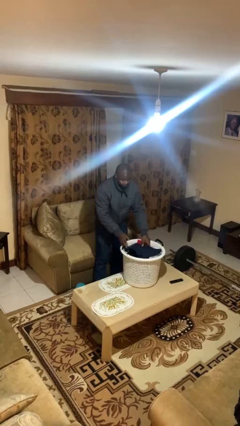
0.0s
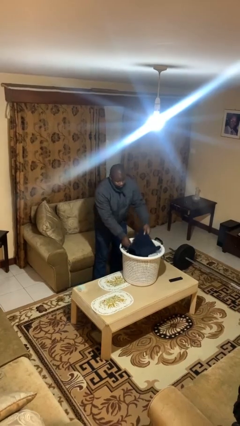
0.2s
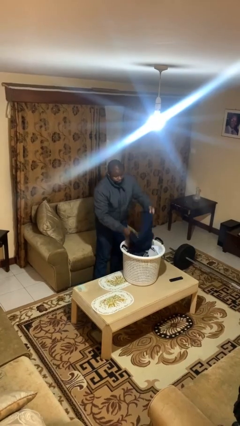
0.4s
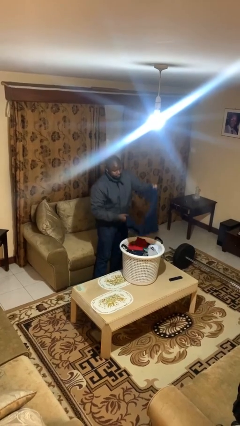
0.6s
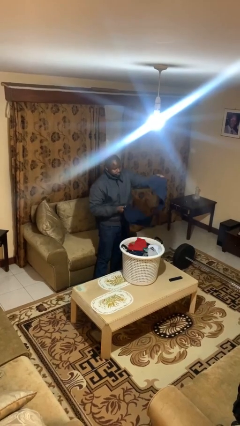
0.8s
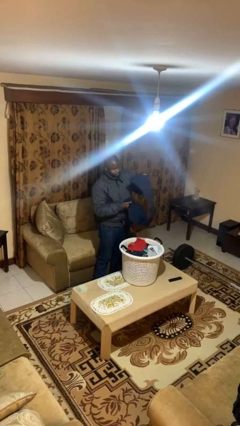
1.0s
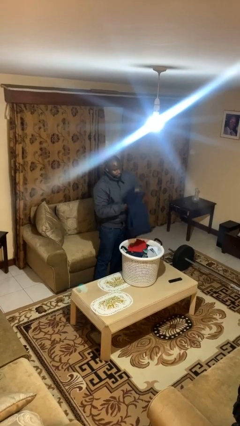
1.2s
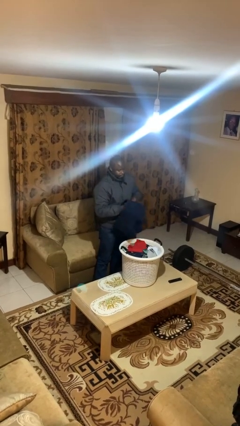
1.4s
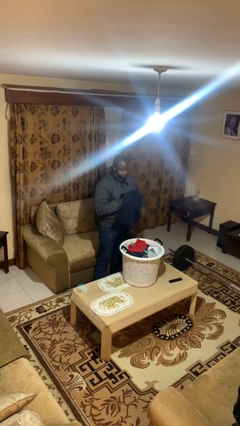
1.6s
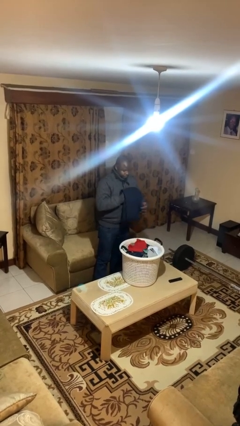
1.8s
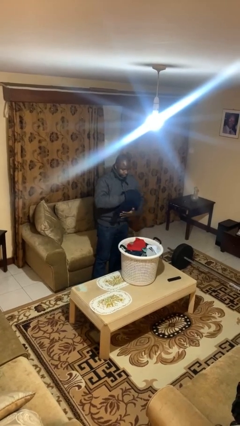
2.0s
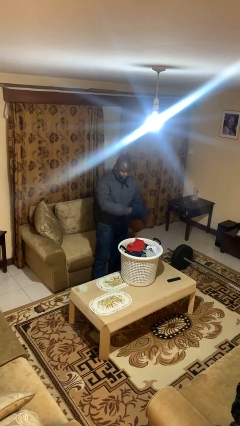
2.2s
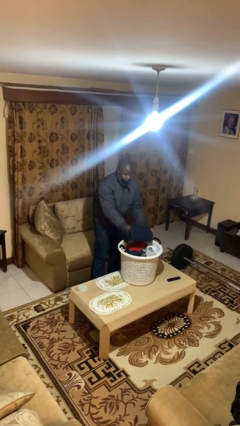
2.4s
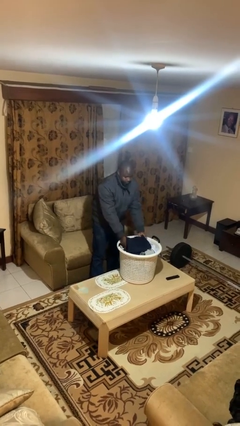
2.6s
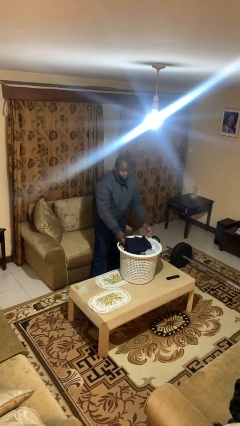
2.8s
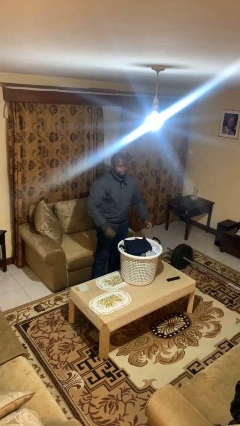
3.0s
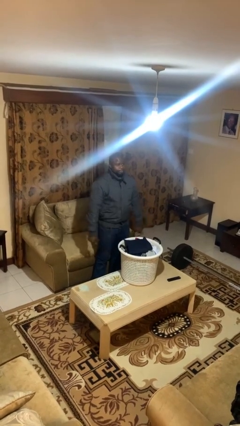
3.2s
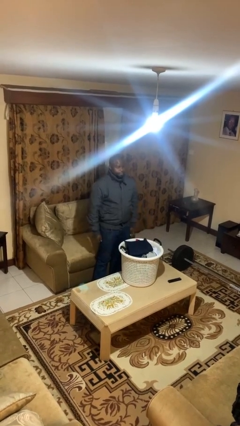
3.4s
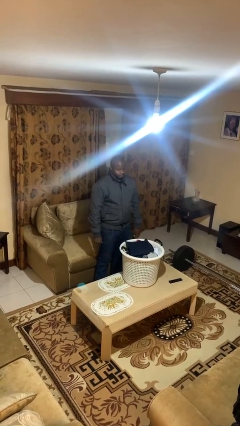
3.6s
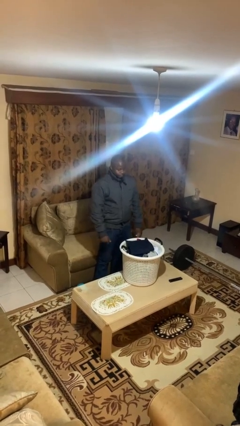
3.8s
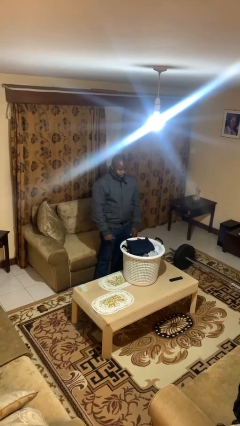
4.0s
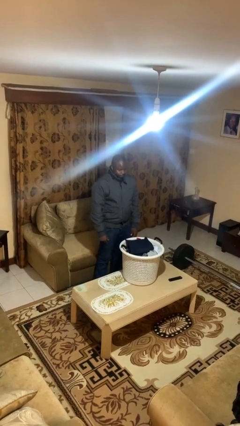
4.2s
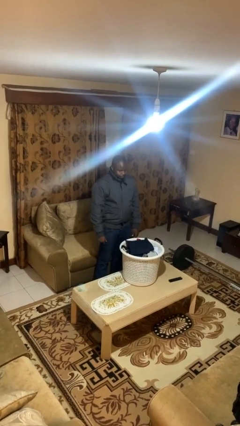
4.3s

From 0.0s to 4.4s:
person folds pants

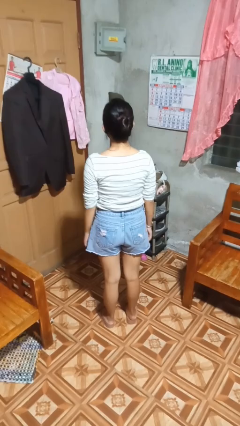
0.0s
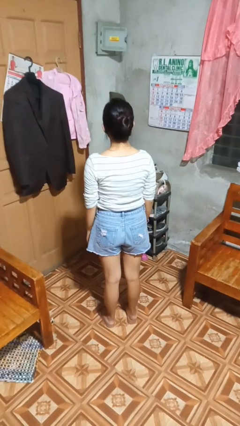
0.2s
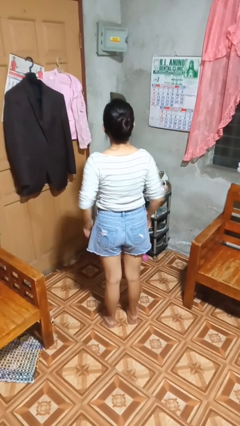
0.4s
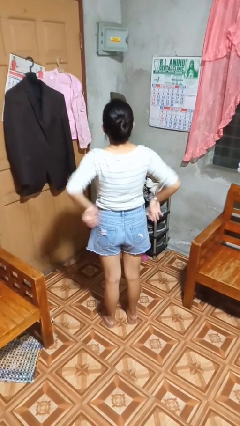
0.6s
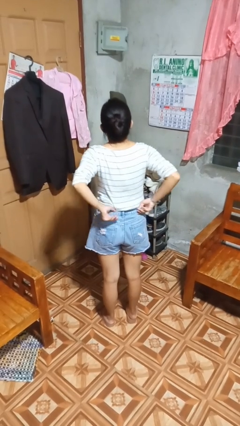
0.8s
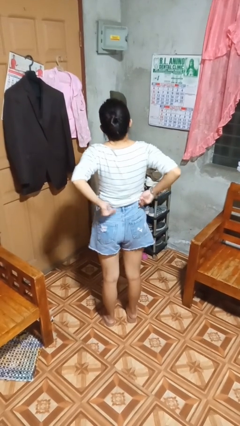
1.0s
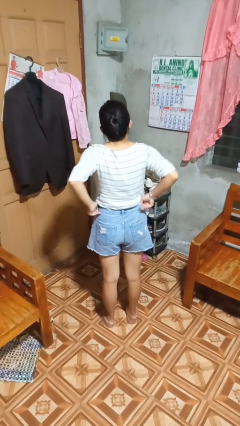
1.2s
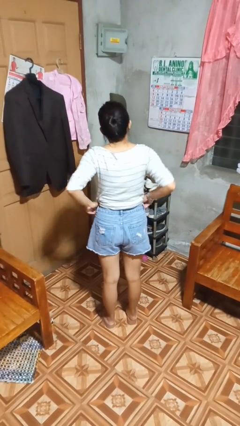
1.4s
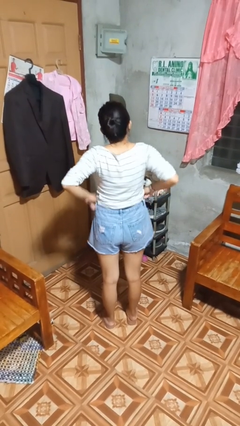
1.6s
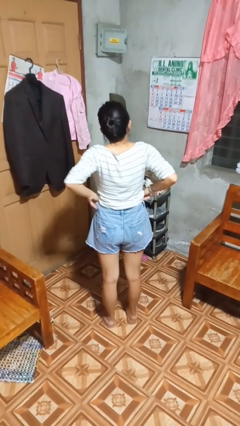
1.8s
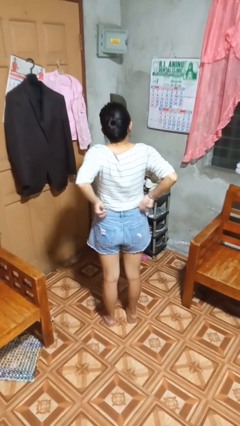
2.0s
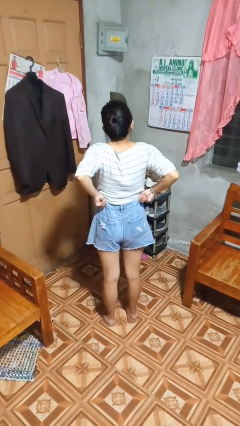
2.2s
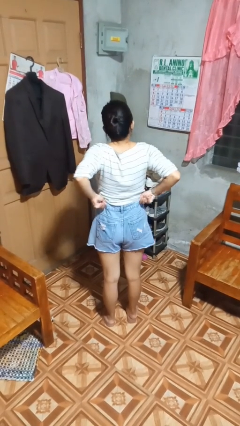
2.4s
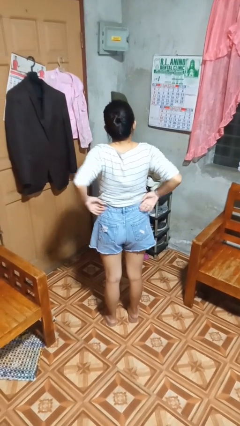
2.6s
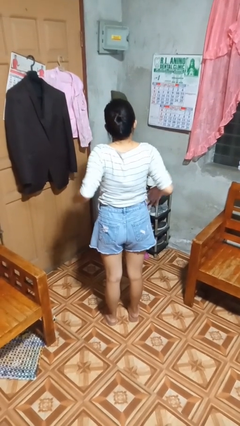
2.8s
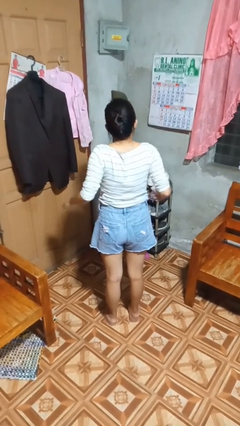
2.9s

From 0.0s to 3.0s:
person hikes up pants

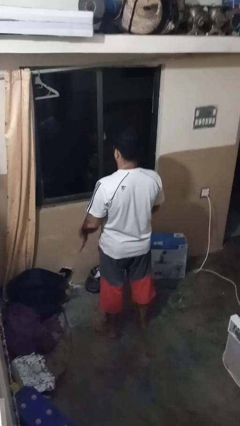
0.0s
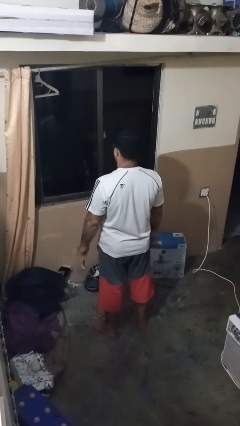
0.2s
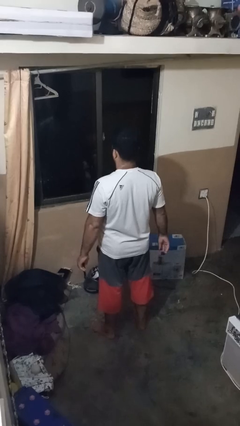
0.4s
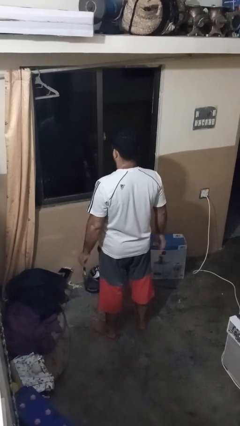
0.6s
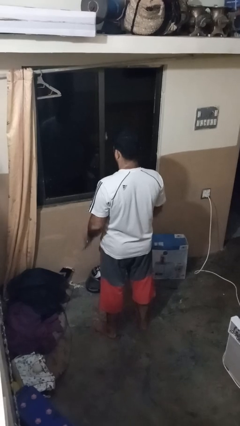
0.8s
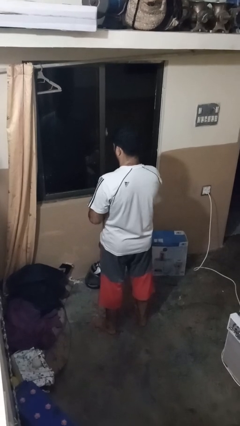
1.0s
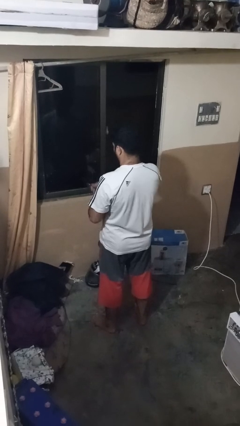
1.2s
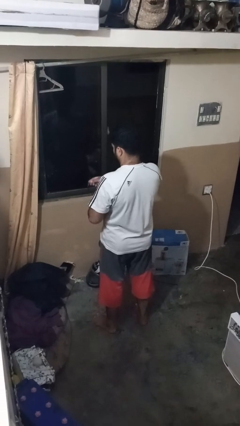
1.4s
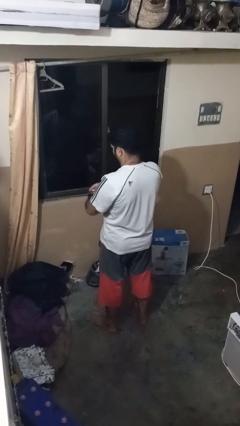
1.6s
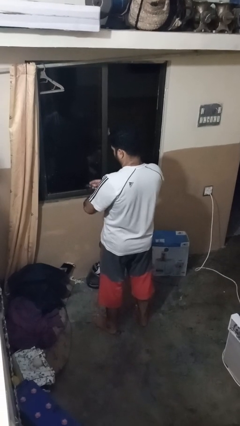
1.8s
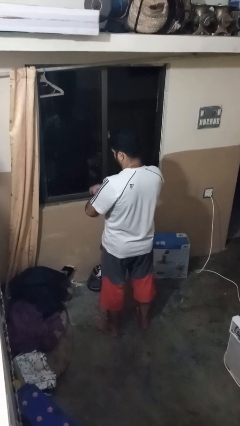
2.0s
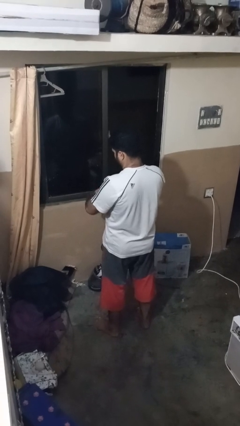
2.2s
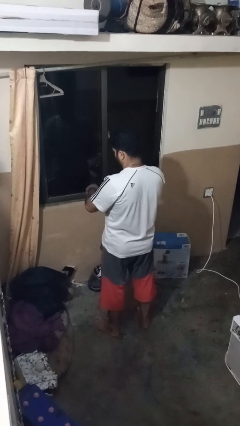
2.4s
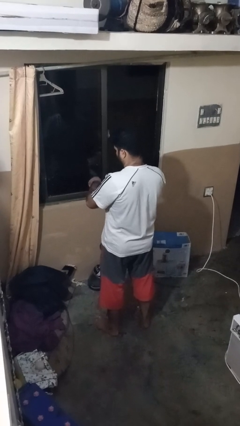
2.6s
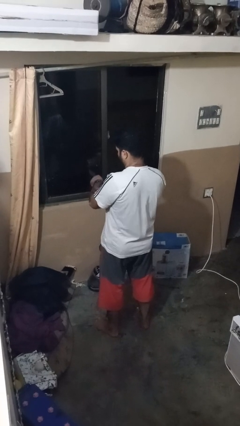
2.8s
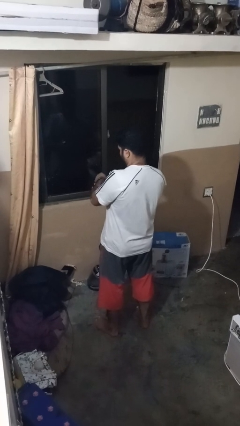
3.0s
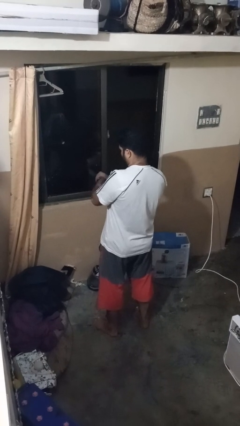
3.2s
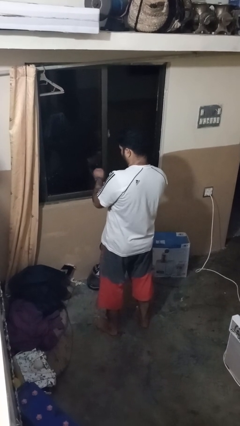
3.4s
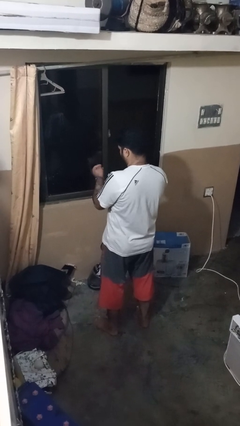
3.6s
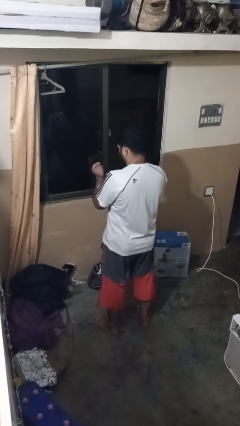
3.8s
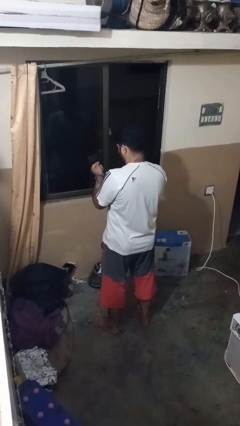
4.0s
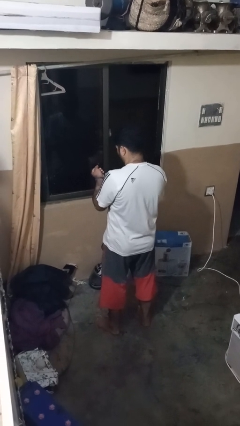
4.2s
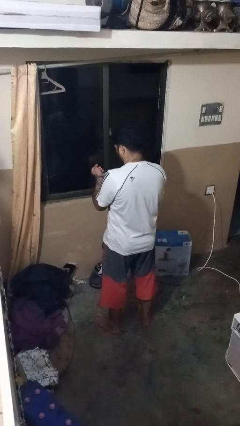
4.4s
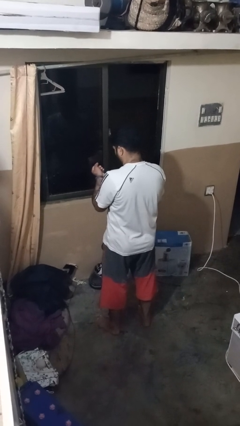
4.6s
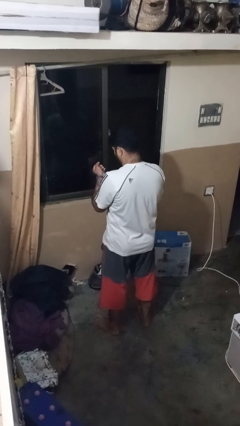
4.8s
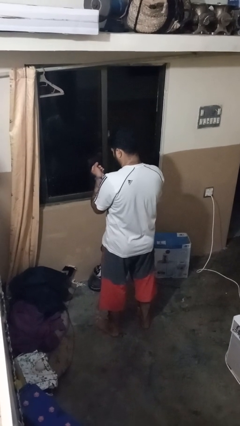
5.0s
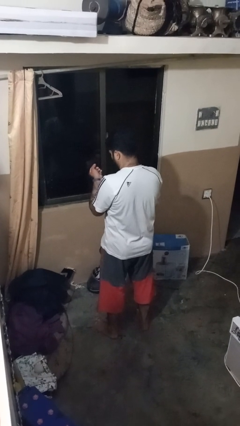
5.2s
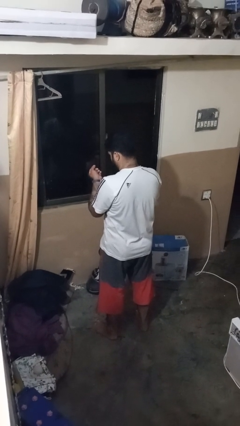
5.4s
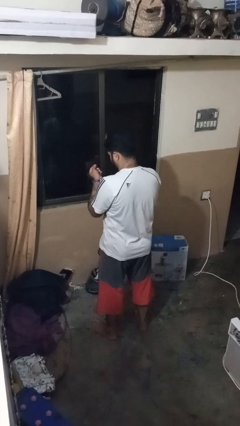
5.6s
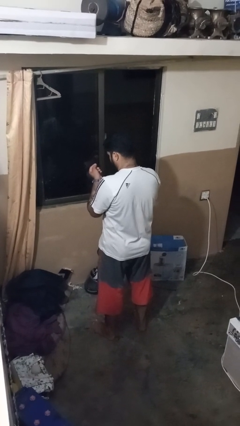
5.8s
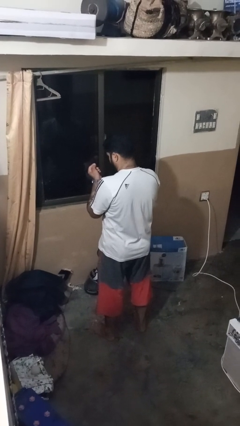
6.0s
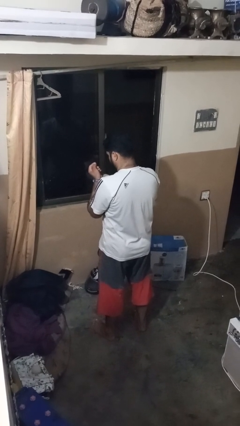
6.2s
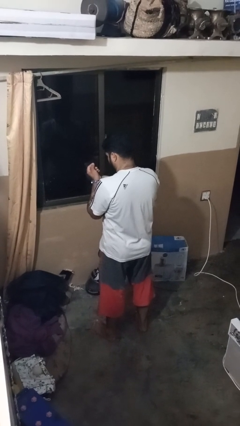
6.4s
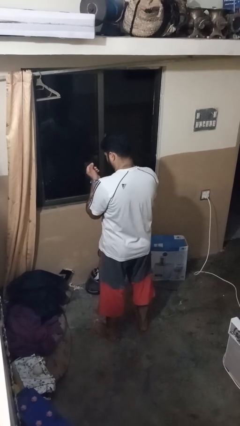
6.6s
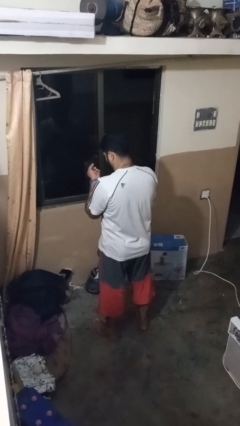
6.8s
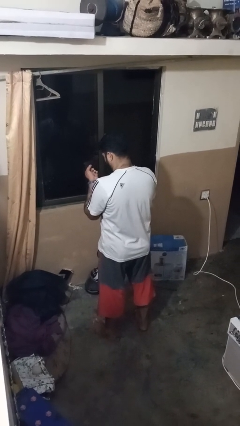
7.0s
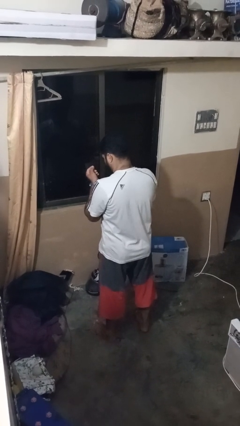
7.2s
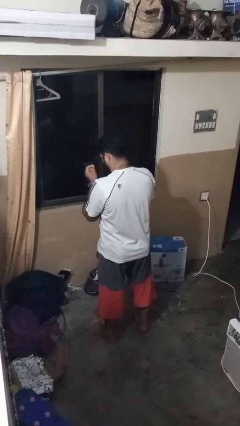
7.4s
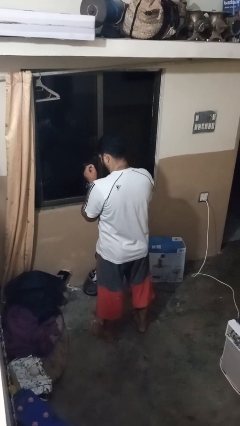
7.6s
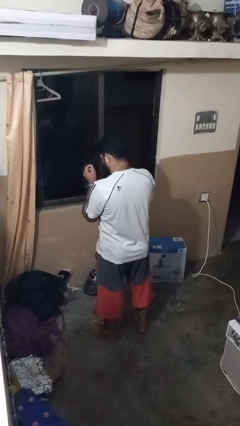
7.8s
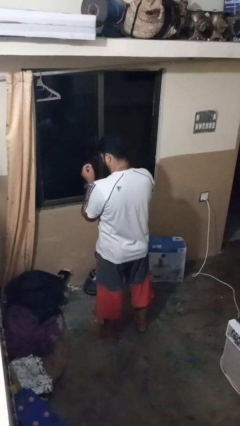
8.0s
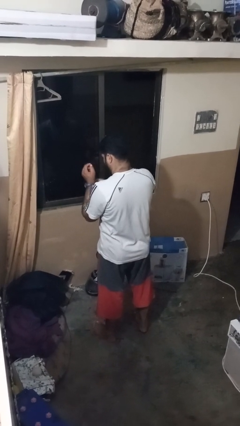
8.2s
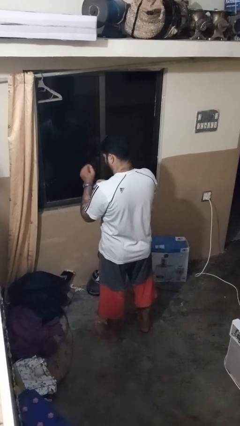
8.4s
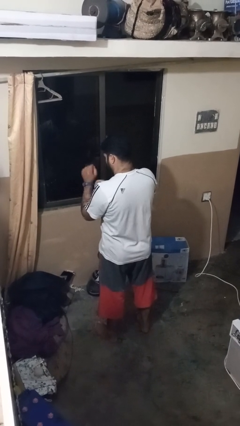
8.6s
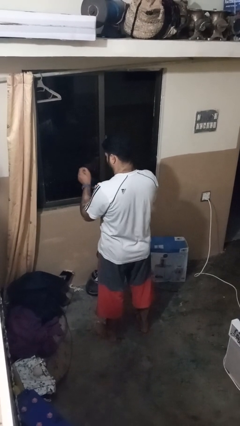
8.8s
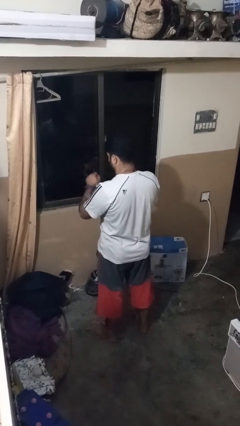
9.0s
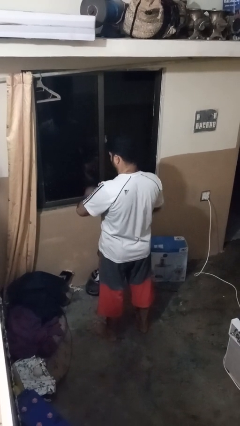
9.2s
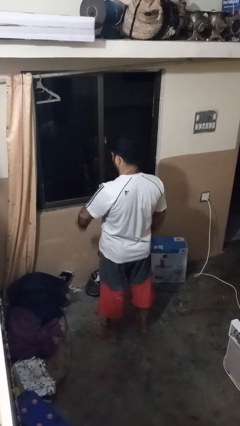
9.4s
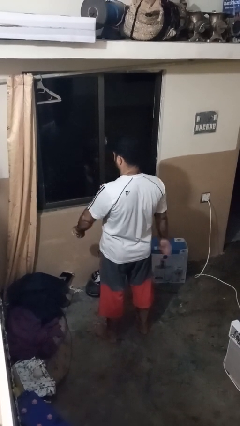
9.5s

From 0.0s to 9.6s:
person puts on wristwatch

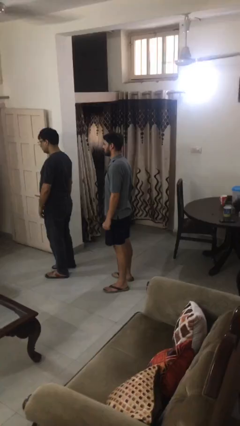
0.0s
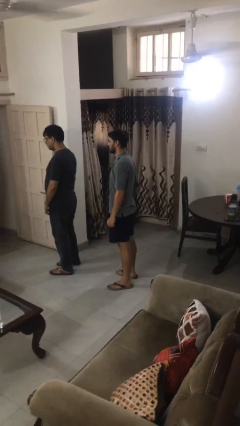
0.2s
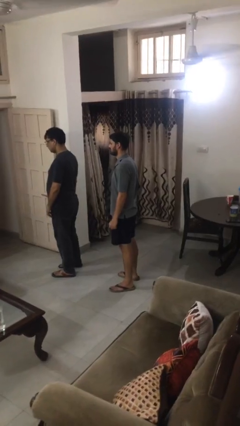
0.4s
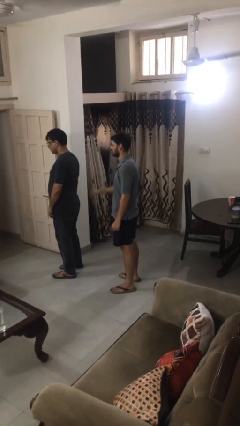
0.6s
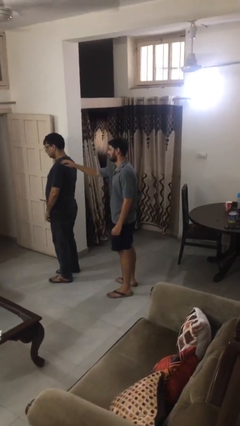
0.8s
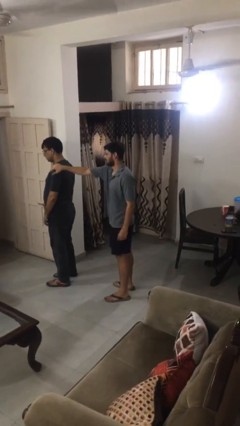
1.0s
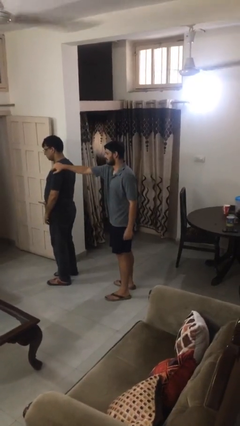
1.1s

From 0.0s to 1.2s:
person grabs person by shoulder
